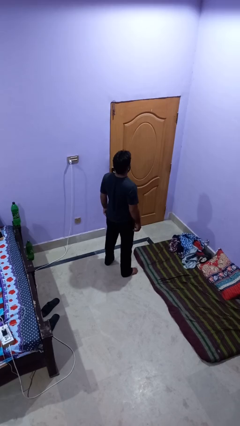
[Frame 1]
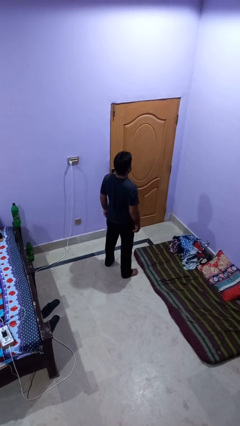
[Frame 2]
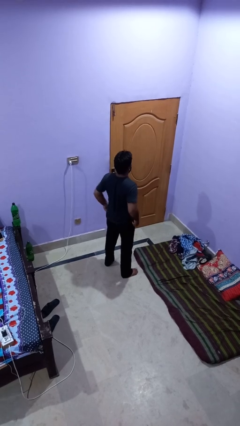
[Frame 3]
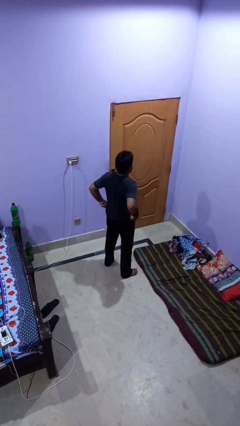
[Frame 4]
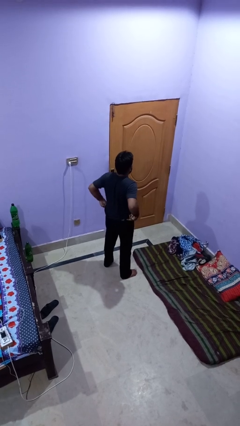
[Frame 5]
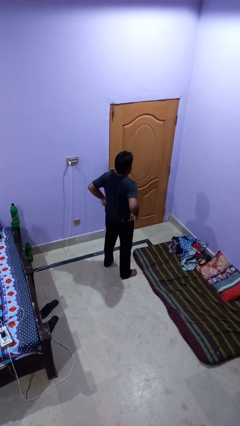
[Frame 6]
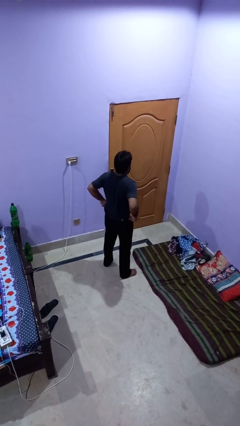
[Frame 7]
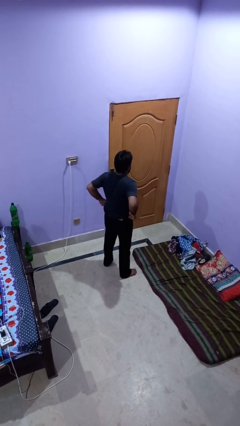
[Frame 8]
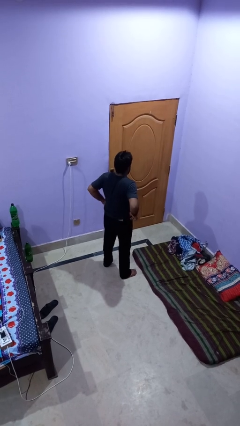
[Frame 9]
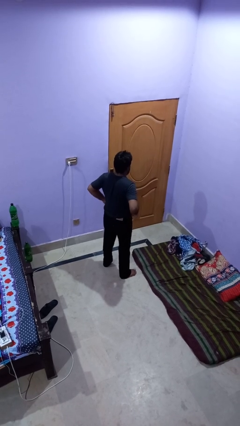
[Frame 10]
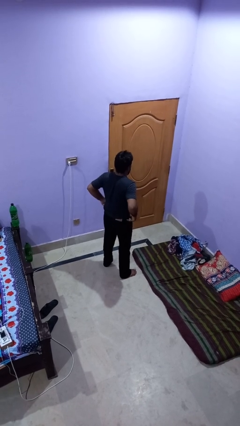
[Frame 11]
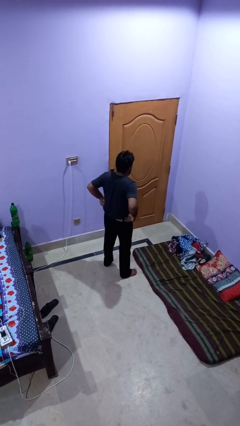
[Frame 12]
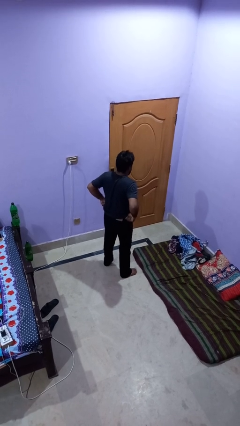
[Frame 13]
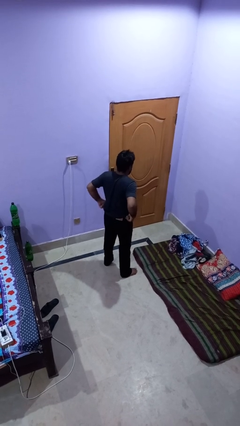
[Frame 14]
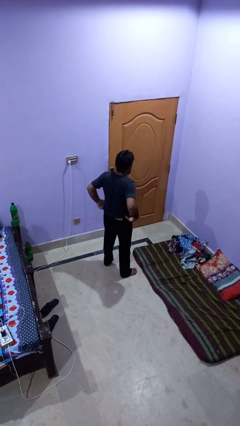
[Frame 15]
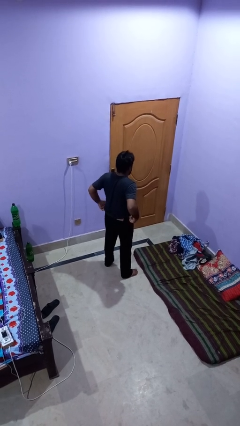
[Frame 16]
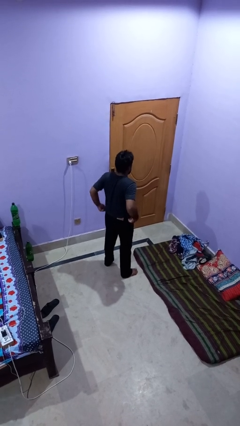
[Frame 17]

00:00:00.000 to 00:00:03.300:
person hikes up pants

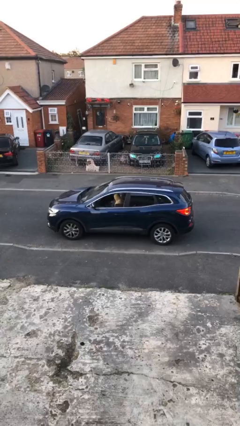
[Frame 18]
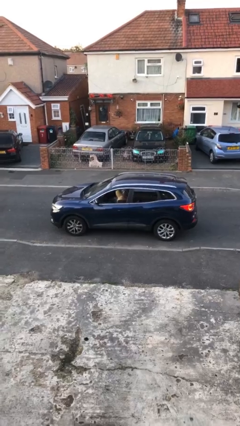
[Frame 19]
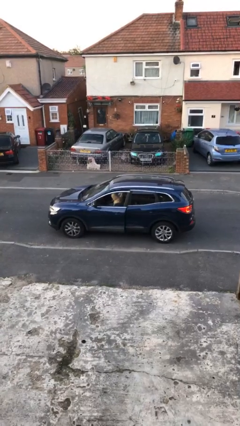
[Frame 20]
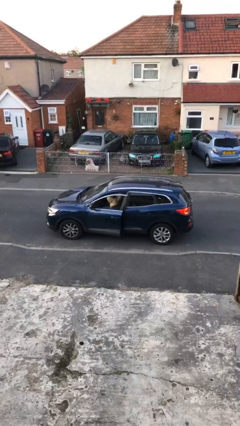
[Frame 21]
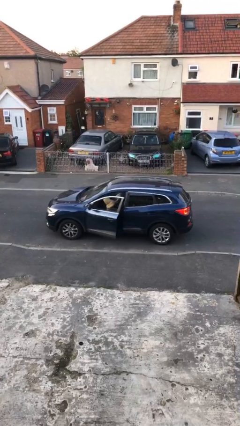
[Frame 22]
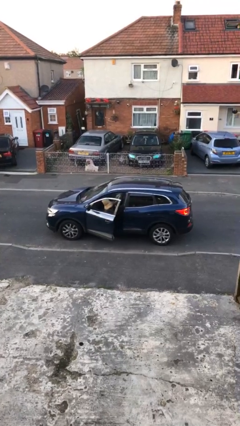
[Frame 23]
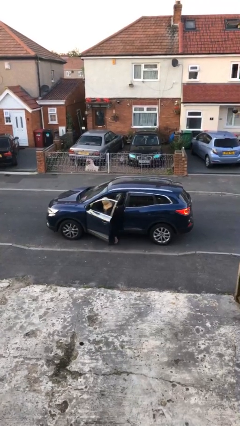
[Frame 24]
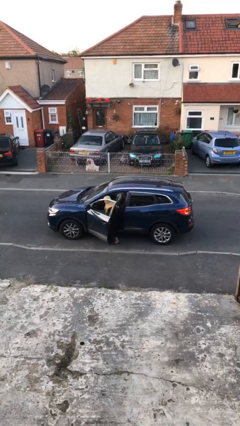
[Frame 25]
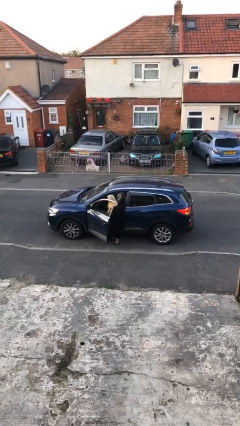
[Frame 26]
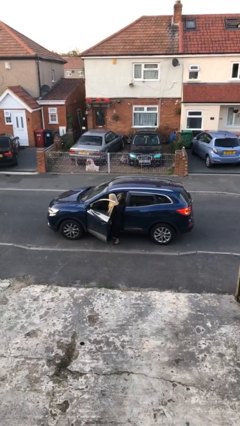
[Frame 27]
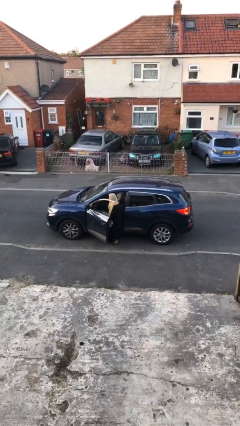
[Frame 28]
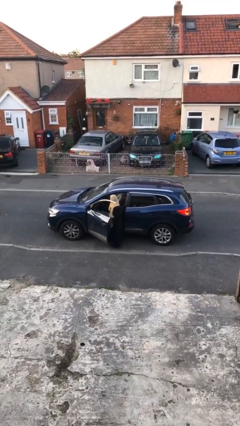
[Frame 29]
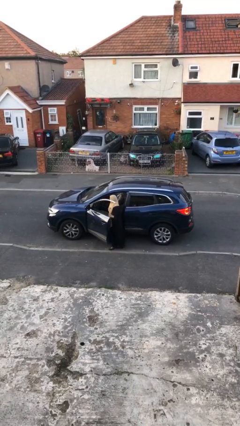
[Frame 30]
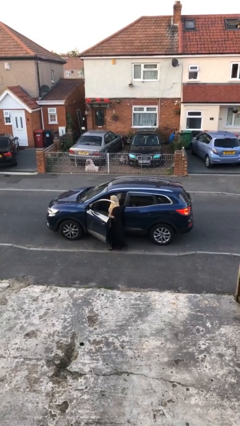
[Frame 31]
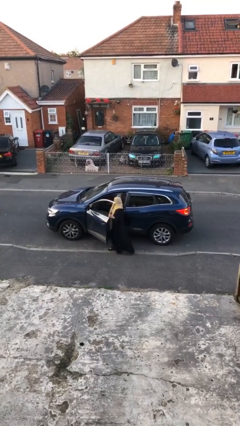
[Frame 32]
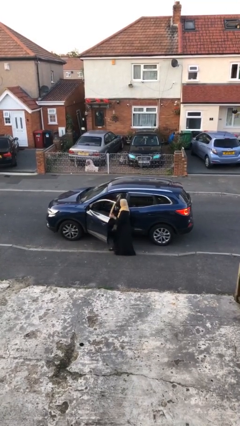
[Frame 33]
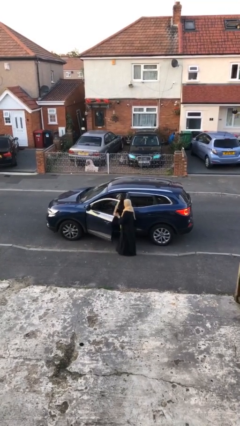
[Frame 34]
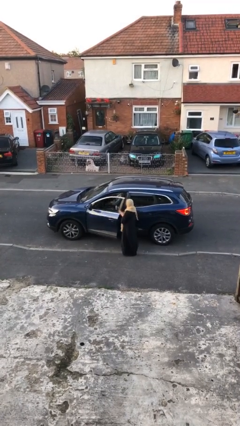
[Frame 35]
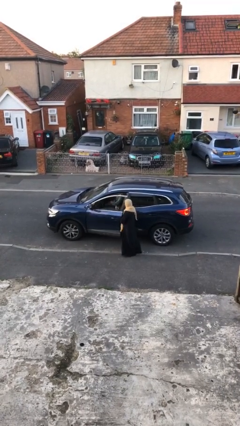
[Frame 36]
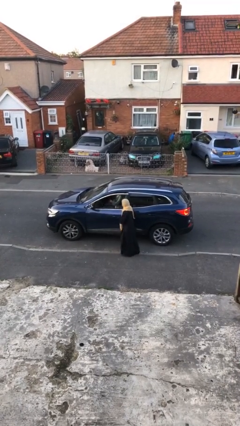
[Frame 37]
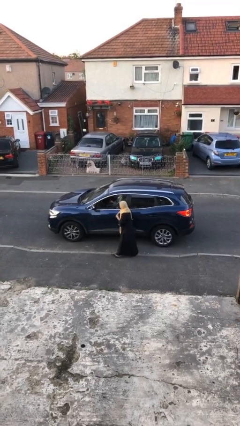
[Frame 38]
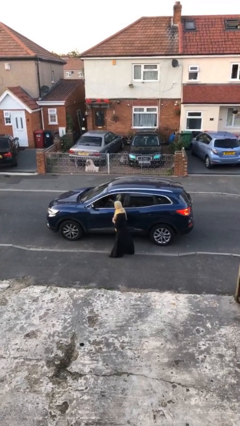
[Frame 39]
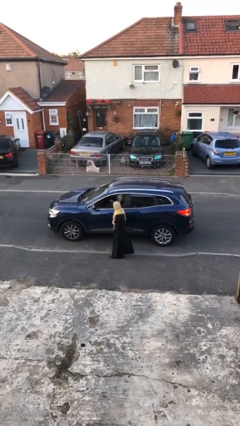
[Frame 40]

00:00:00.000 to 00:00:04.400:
car drops off person

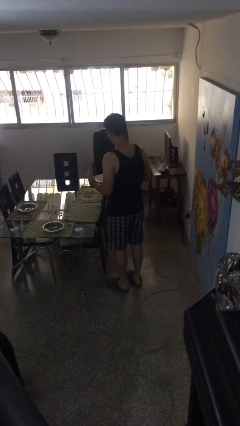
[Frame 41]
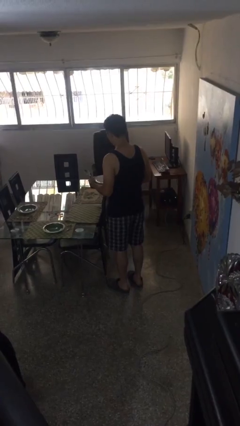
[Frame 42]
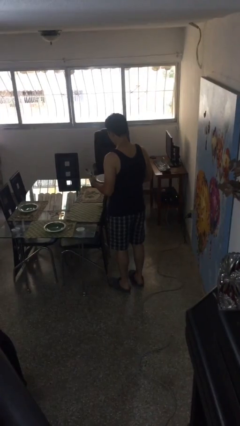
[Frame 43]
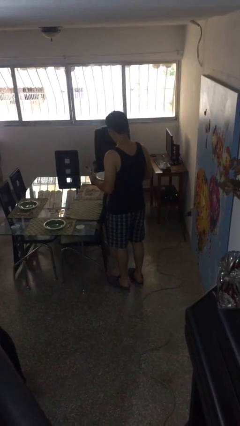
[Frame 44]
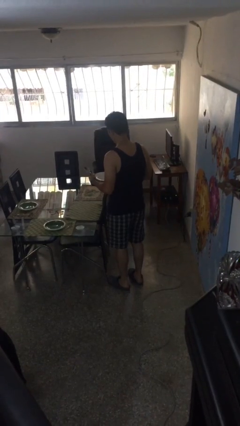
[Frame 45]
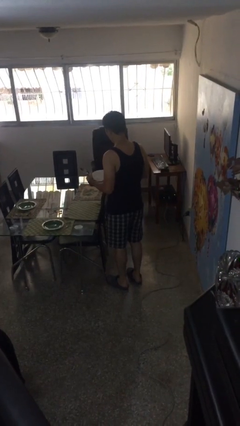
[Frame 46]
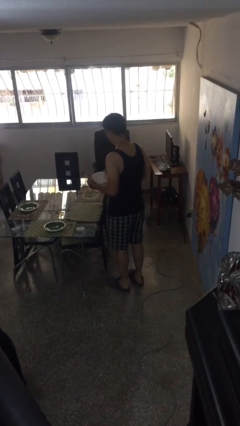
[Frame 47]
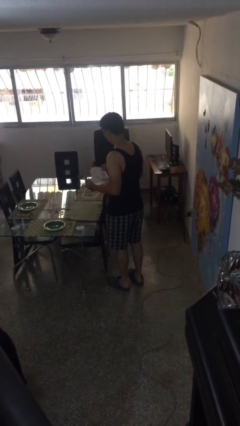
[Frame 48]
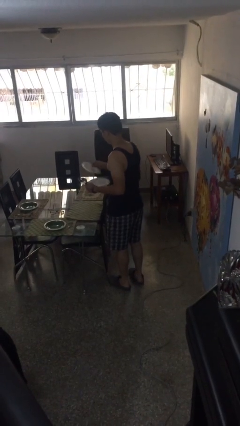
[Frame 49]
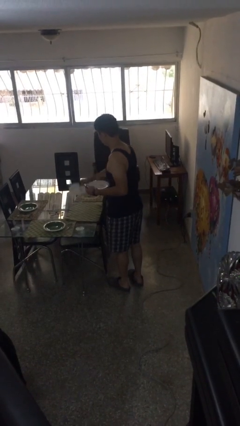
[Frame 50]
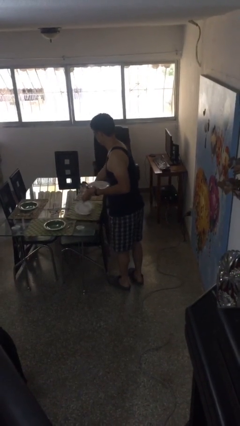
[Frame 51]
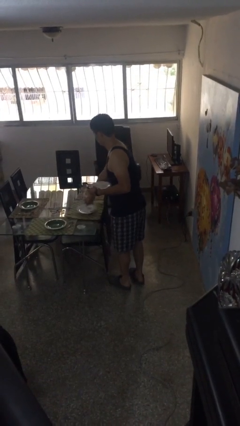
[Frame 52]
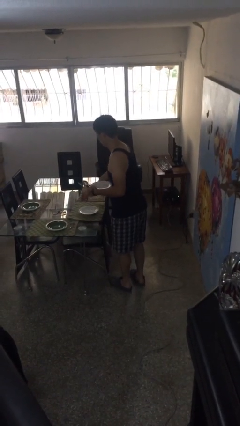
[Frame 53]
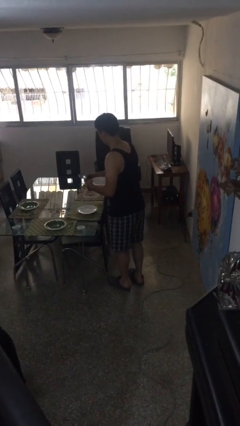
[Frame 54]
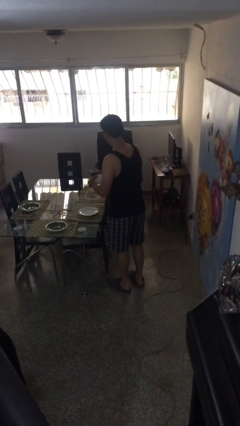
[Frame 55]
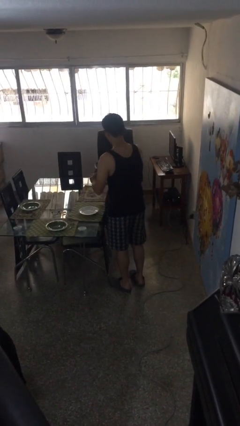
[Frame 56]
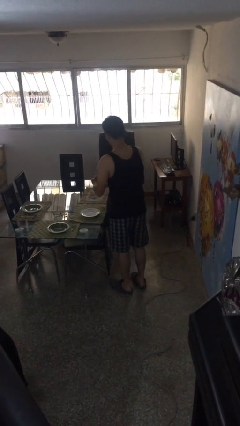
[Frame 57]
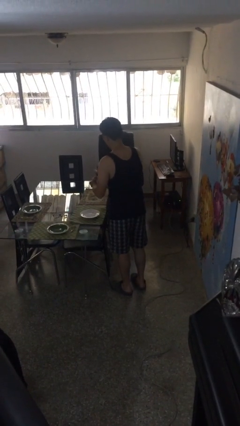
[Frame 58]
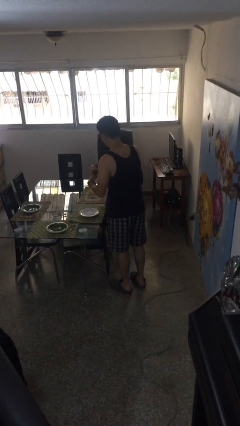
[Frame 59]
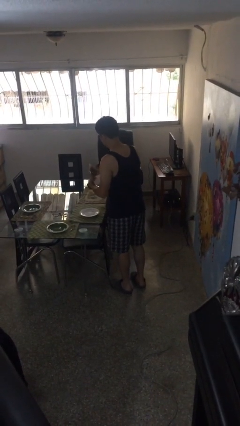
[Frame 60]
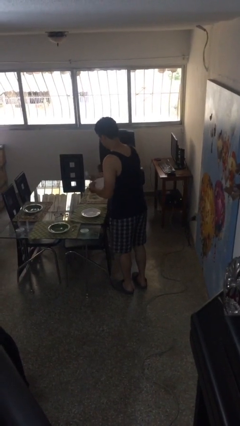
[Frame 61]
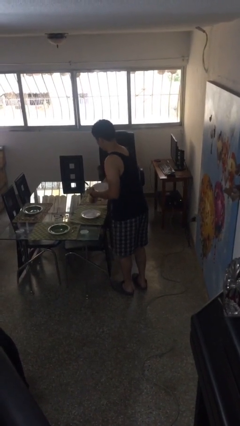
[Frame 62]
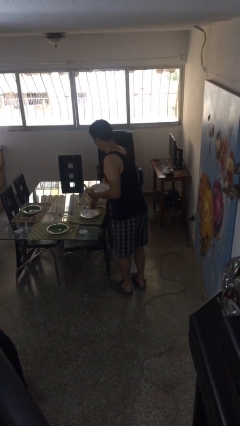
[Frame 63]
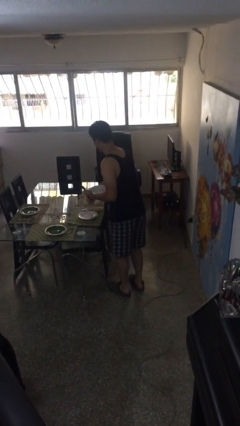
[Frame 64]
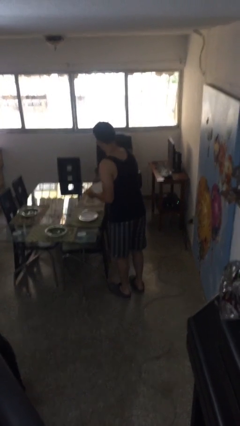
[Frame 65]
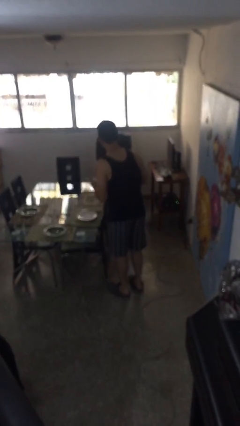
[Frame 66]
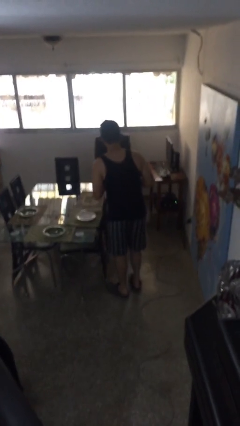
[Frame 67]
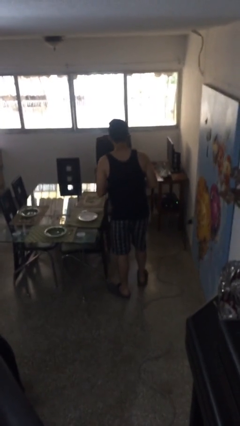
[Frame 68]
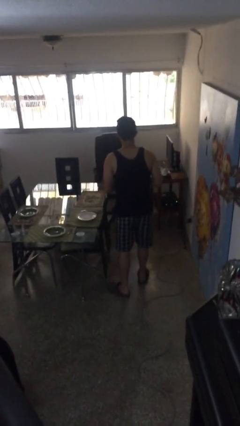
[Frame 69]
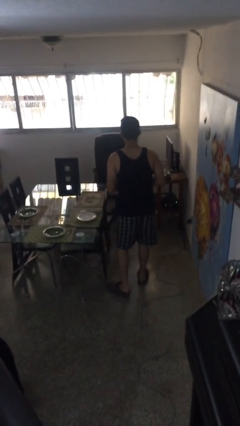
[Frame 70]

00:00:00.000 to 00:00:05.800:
person sets table

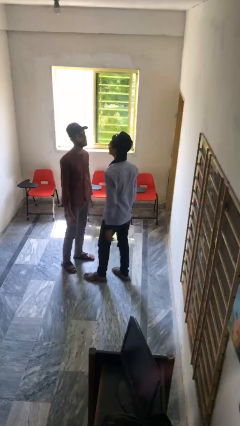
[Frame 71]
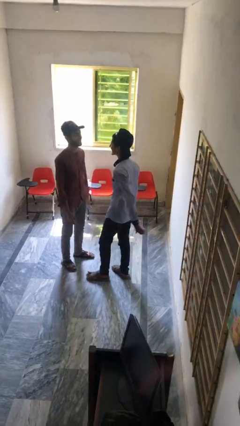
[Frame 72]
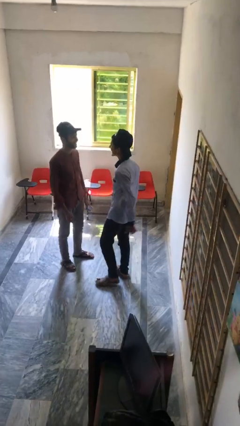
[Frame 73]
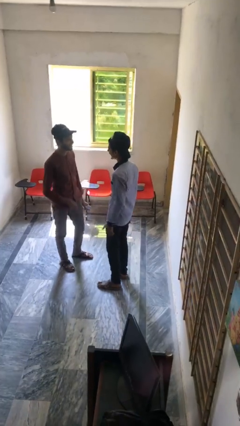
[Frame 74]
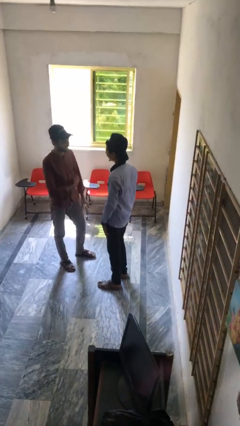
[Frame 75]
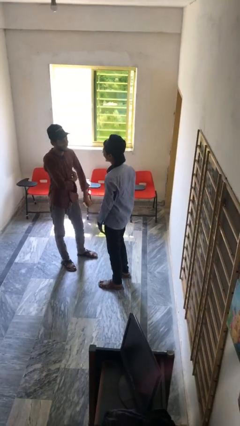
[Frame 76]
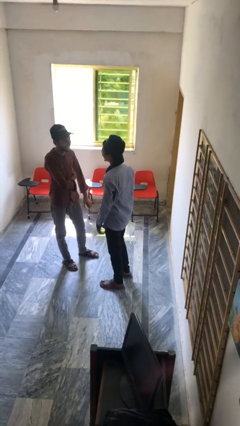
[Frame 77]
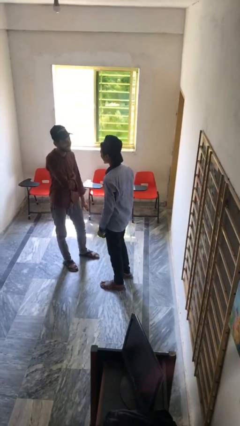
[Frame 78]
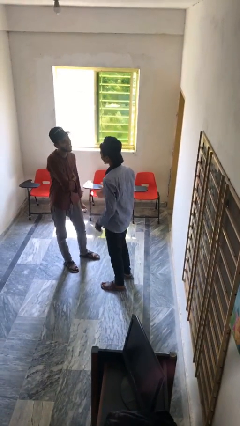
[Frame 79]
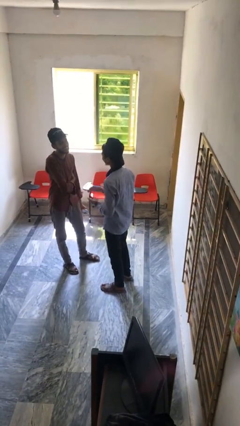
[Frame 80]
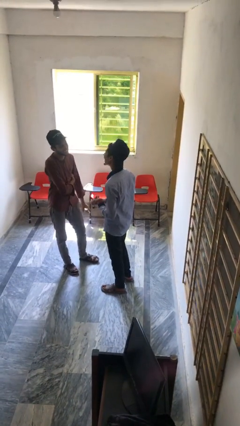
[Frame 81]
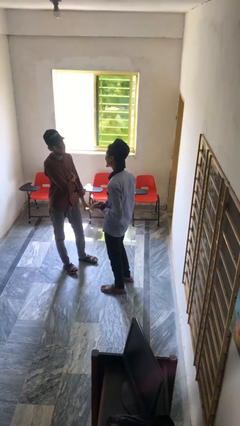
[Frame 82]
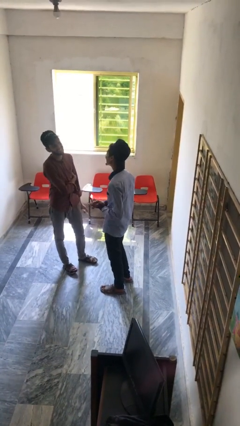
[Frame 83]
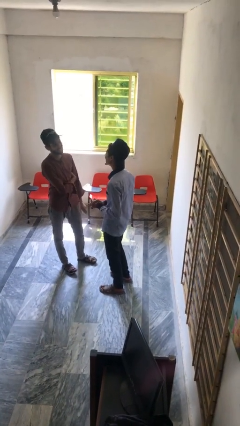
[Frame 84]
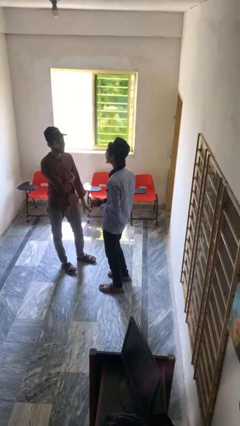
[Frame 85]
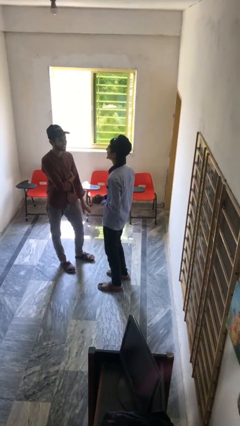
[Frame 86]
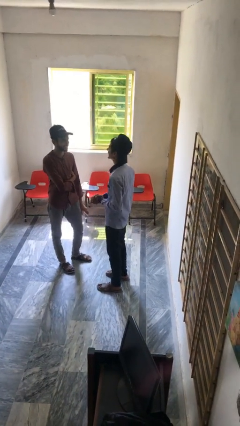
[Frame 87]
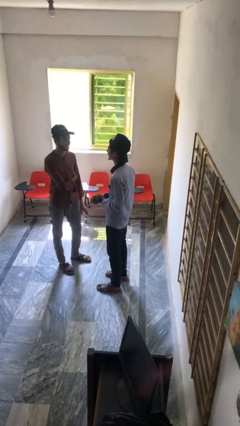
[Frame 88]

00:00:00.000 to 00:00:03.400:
person talks to person

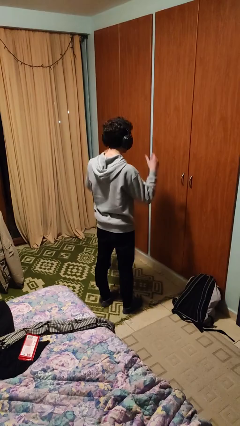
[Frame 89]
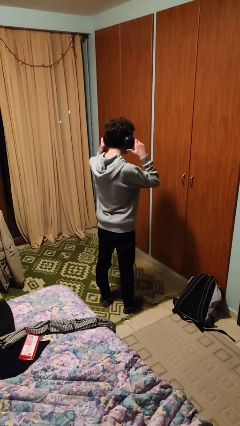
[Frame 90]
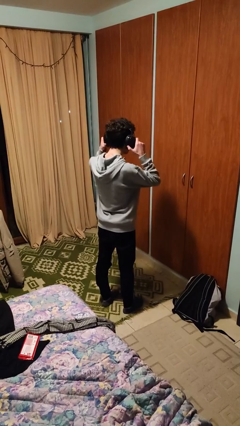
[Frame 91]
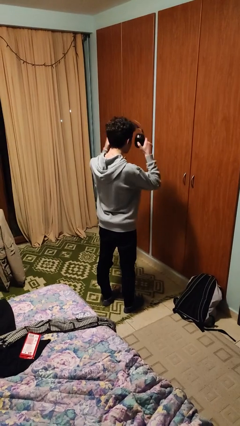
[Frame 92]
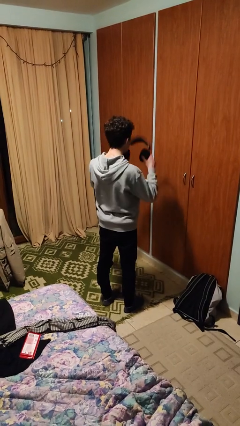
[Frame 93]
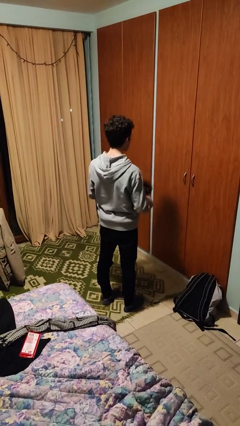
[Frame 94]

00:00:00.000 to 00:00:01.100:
person takes off headphones
